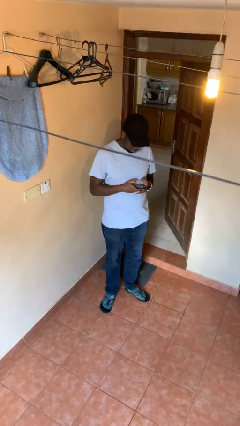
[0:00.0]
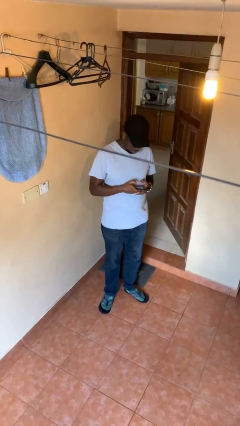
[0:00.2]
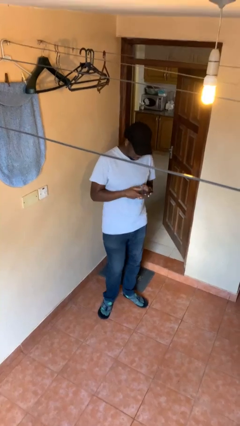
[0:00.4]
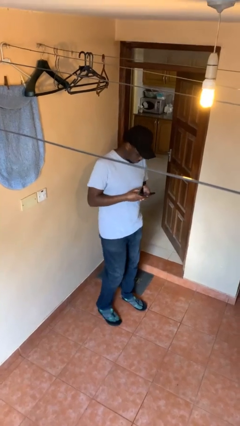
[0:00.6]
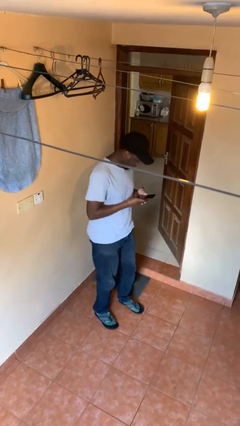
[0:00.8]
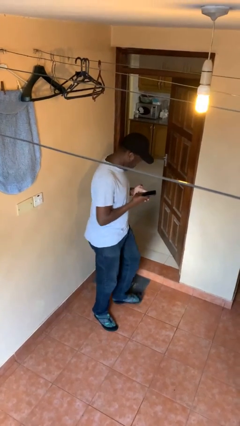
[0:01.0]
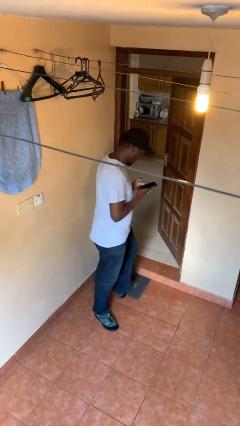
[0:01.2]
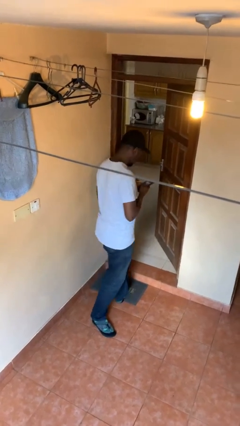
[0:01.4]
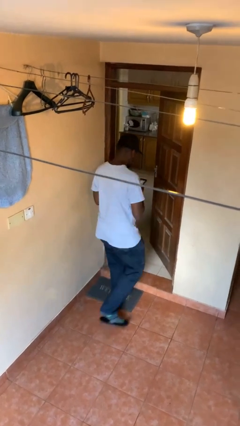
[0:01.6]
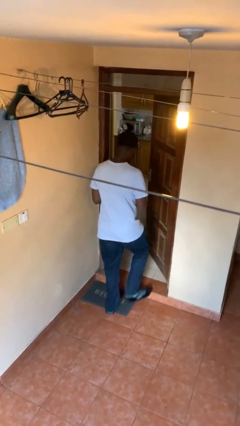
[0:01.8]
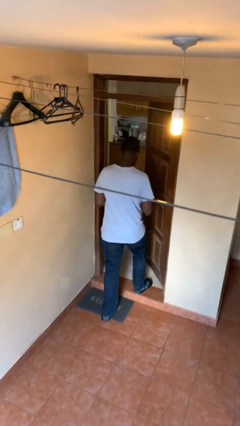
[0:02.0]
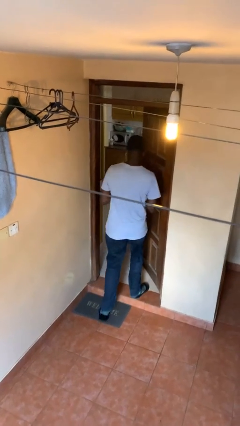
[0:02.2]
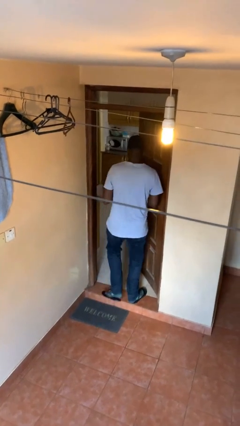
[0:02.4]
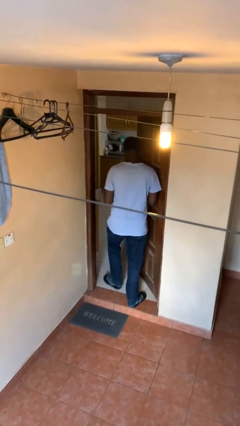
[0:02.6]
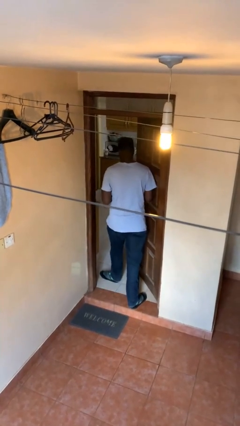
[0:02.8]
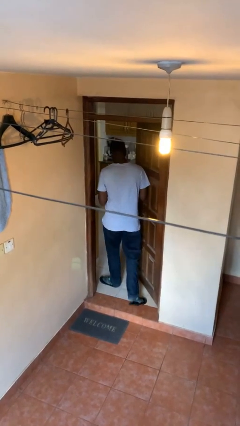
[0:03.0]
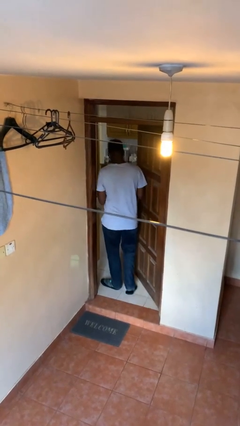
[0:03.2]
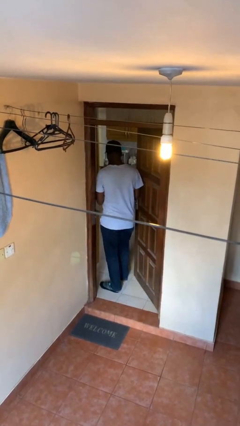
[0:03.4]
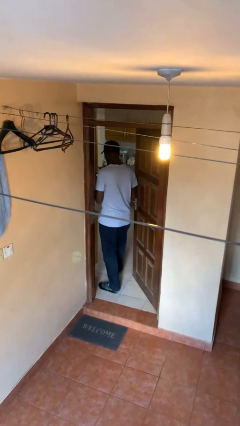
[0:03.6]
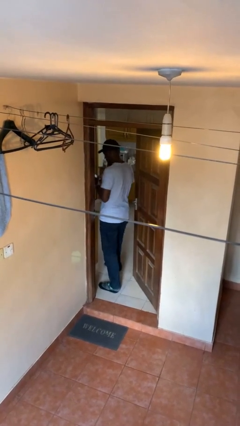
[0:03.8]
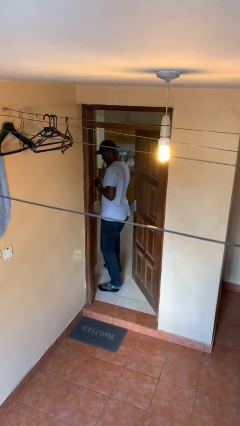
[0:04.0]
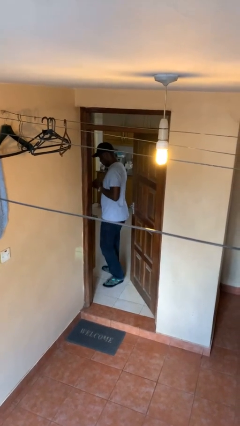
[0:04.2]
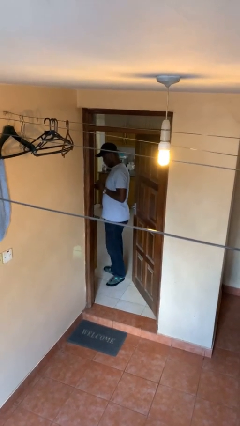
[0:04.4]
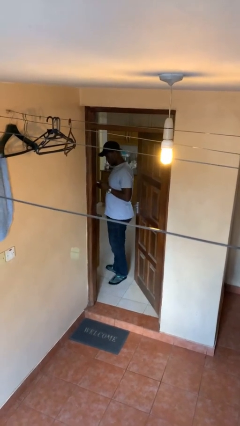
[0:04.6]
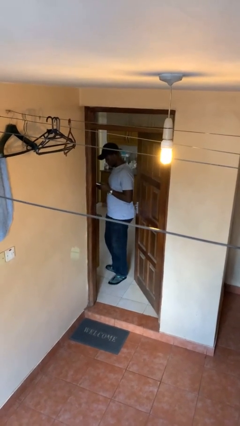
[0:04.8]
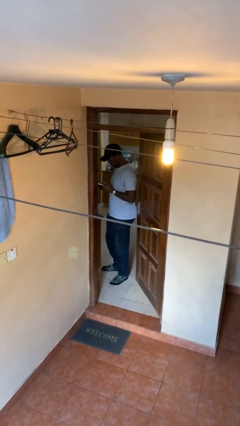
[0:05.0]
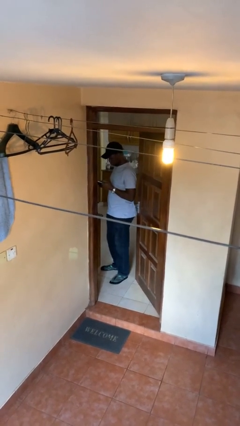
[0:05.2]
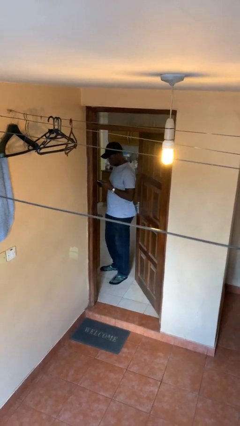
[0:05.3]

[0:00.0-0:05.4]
person exits scene through structure

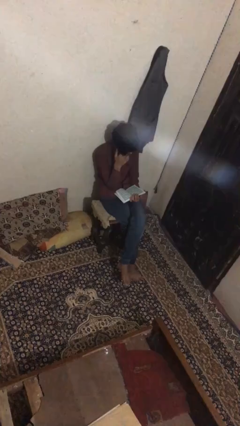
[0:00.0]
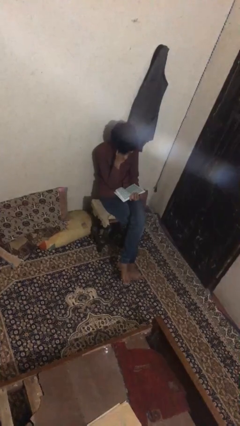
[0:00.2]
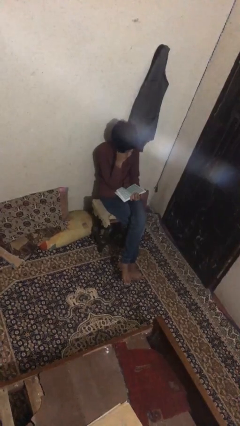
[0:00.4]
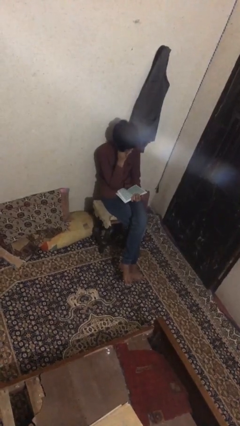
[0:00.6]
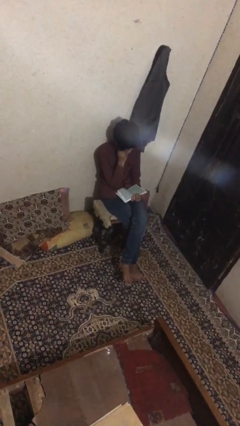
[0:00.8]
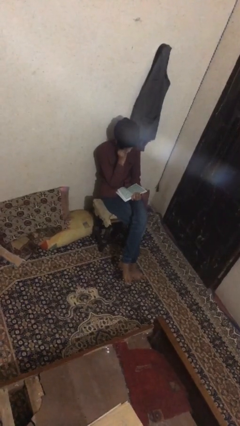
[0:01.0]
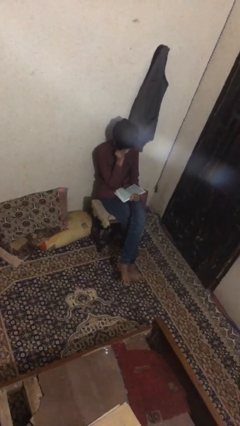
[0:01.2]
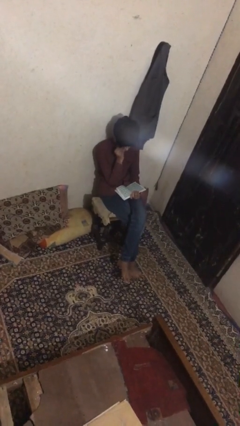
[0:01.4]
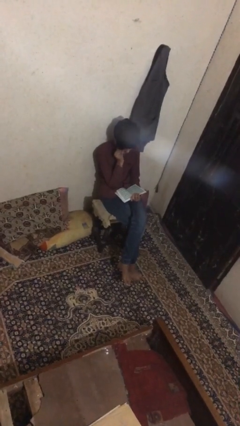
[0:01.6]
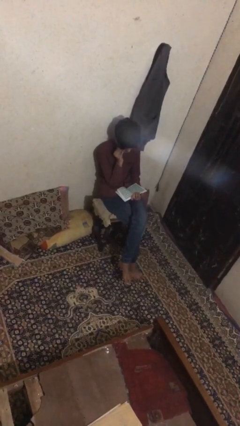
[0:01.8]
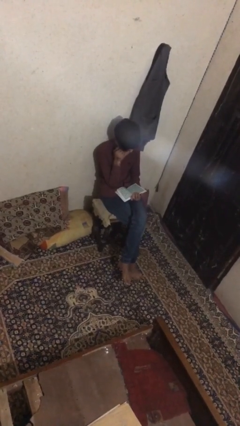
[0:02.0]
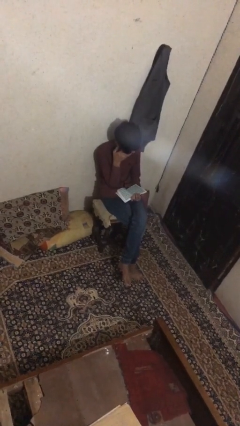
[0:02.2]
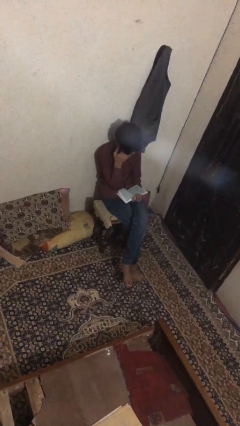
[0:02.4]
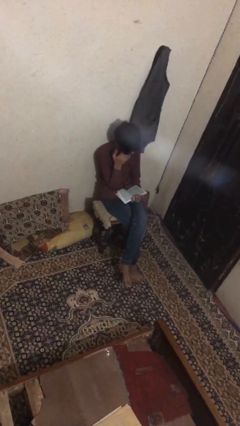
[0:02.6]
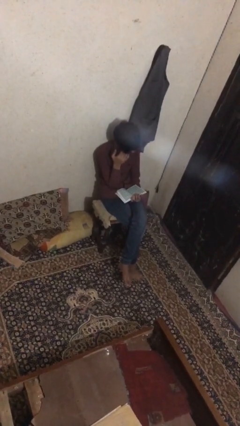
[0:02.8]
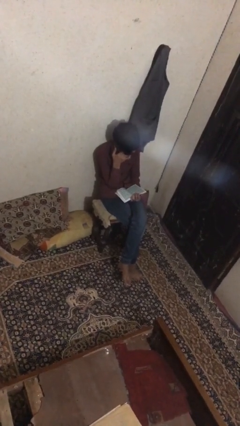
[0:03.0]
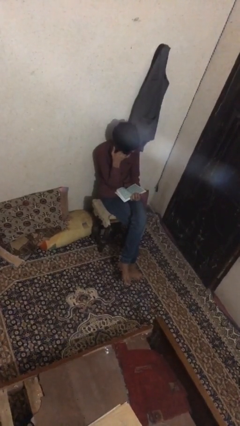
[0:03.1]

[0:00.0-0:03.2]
person reads document

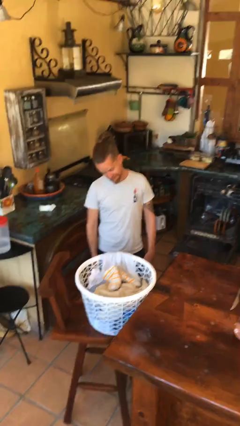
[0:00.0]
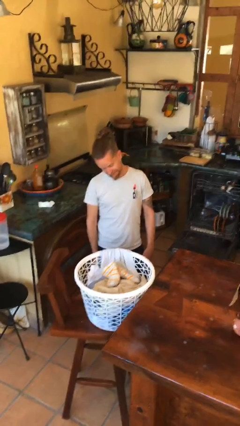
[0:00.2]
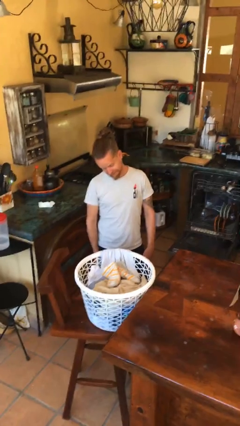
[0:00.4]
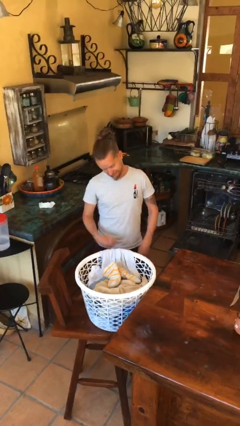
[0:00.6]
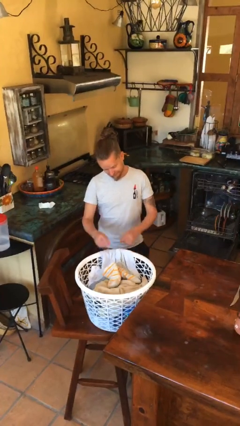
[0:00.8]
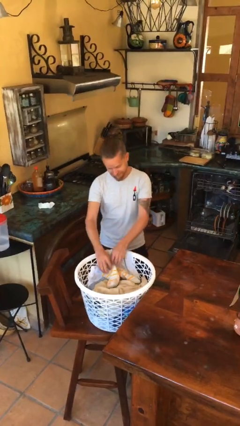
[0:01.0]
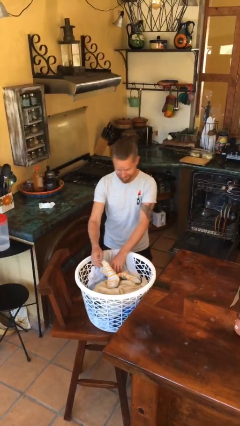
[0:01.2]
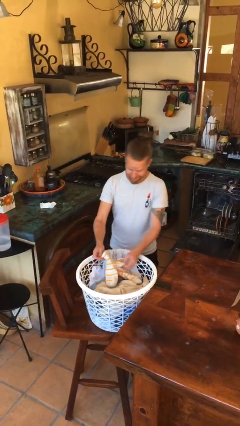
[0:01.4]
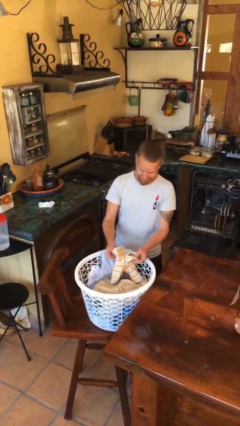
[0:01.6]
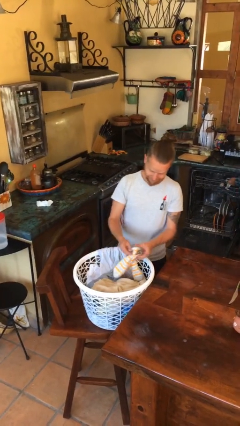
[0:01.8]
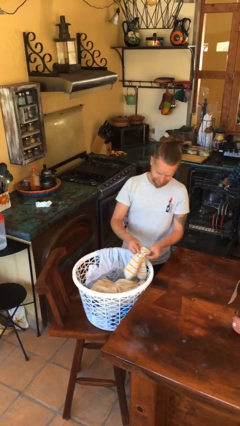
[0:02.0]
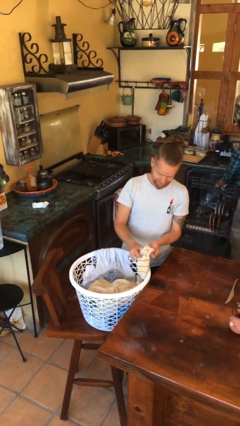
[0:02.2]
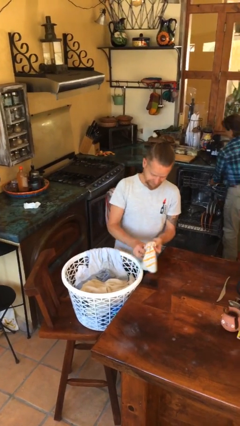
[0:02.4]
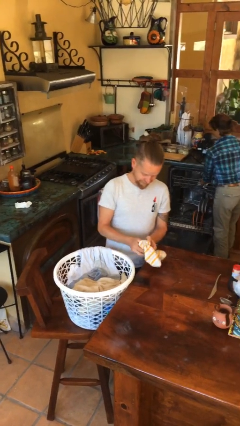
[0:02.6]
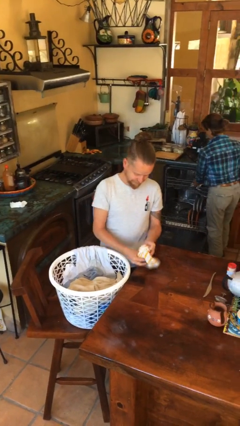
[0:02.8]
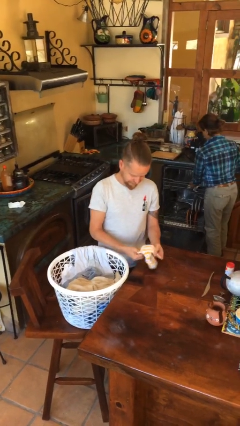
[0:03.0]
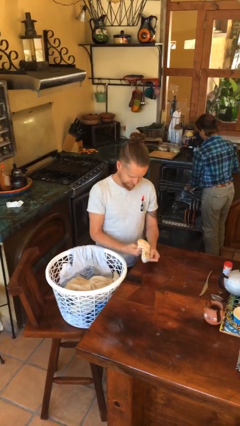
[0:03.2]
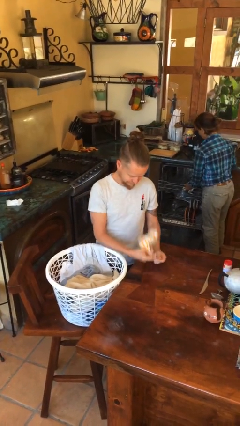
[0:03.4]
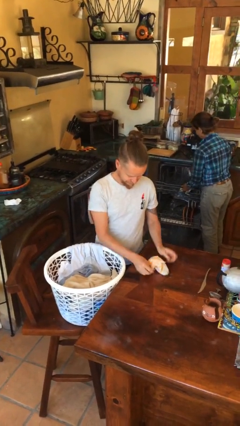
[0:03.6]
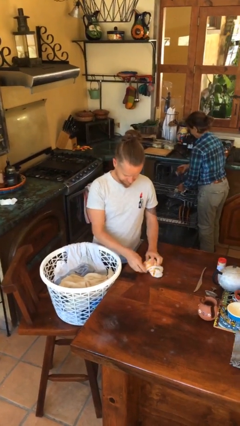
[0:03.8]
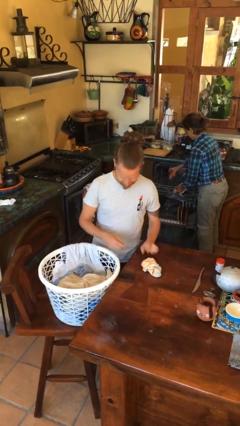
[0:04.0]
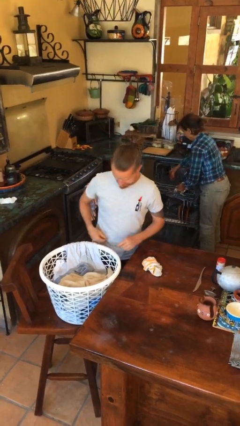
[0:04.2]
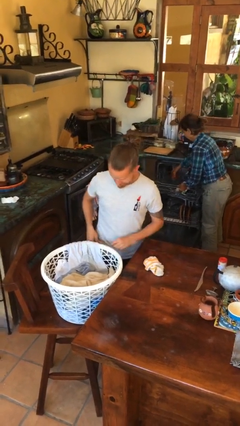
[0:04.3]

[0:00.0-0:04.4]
person folds socks

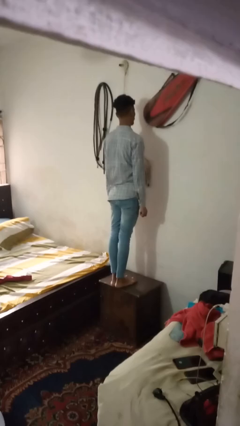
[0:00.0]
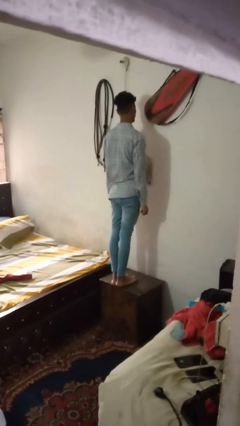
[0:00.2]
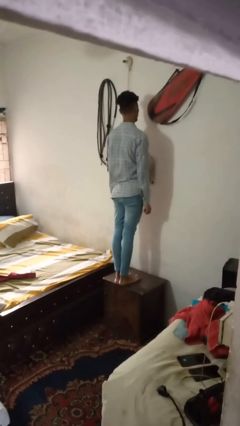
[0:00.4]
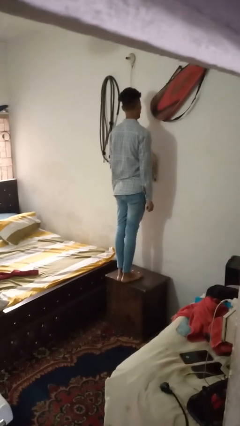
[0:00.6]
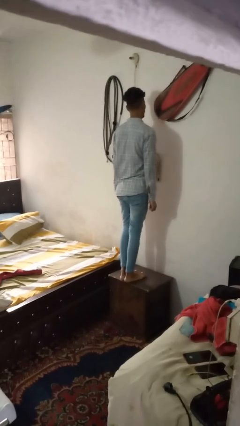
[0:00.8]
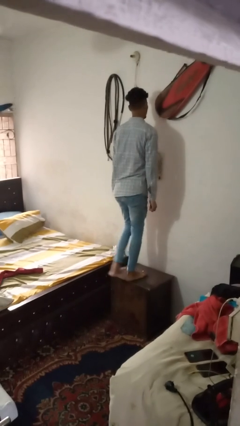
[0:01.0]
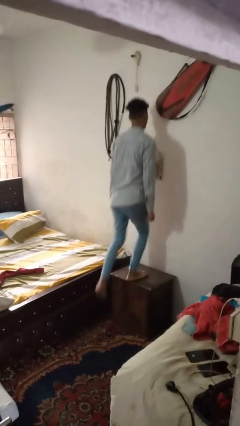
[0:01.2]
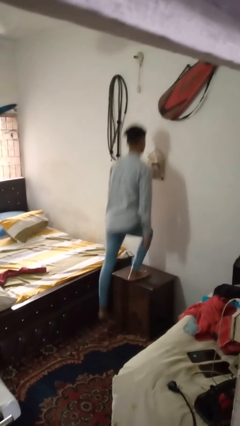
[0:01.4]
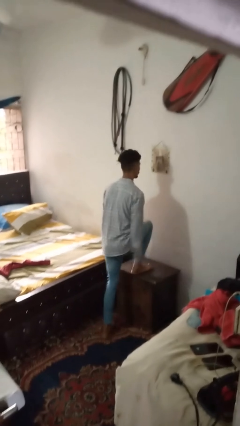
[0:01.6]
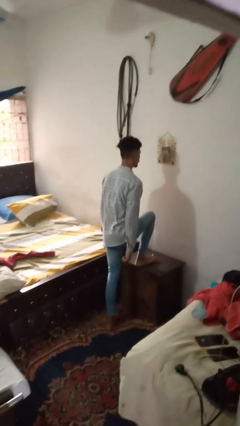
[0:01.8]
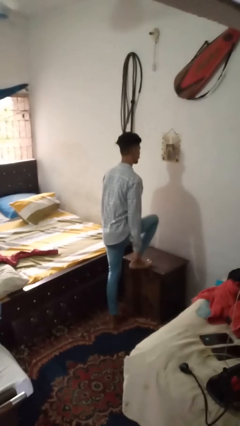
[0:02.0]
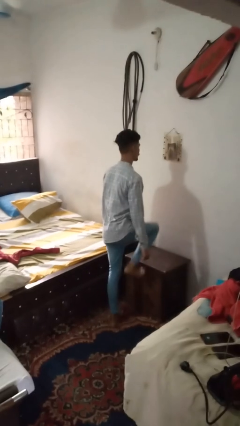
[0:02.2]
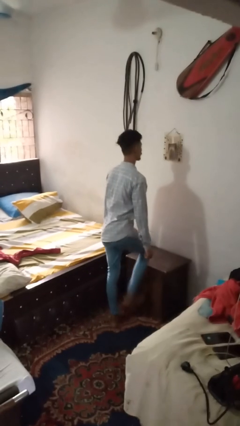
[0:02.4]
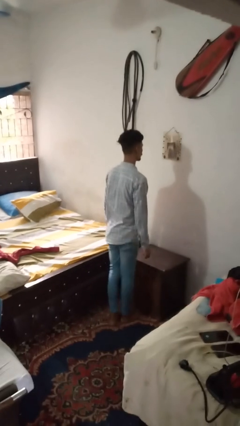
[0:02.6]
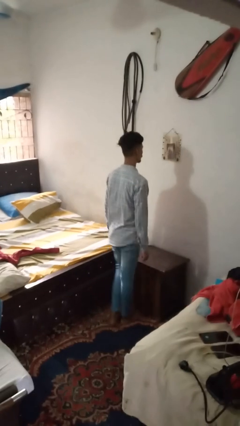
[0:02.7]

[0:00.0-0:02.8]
person climbs off table

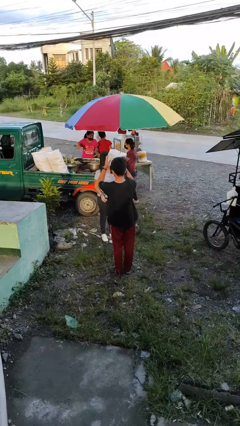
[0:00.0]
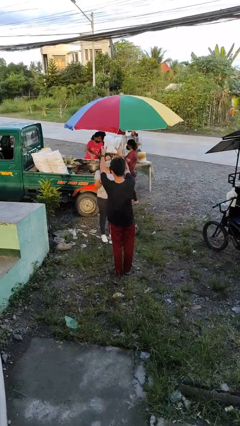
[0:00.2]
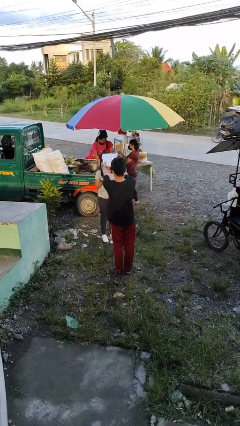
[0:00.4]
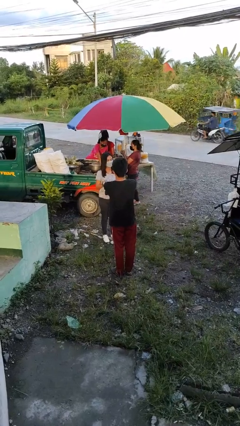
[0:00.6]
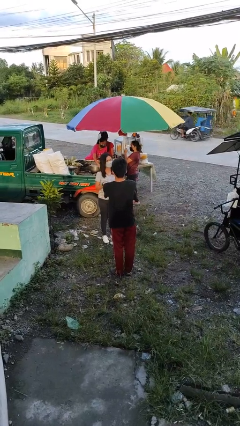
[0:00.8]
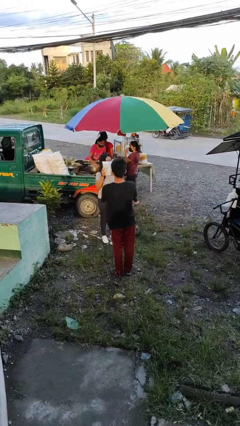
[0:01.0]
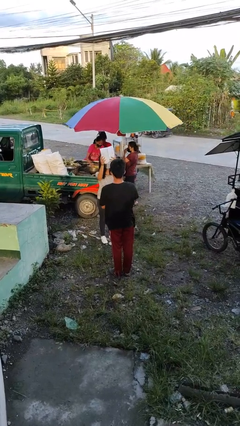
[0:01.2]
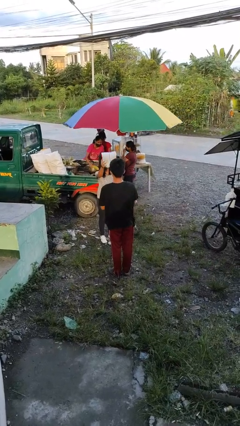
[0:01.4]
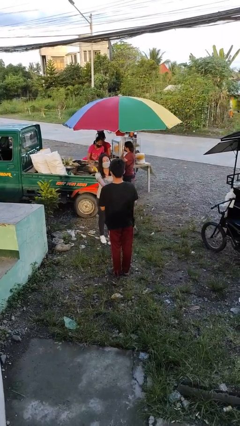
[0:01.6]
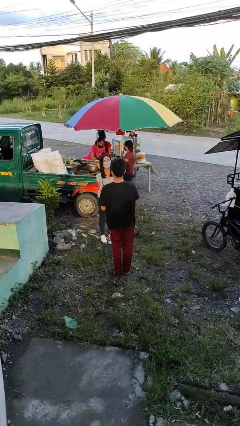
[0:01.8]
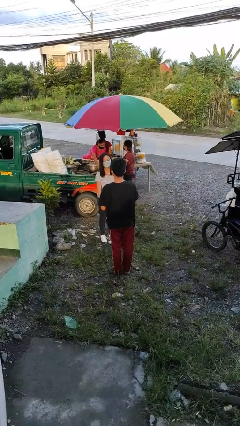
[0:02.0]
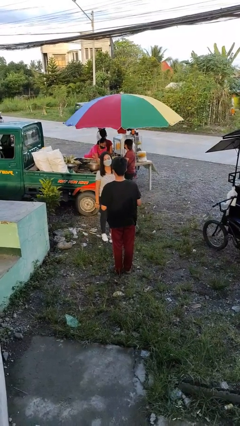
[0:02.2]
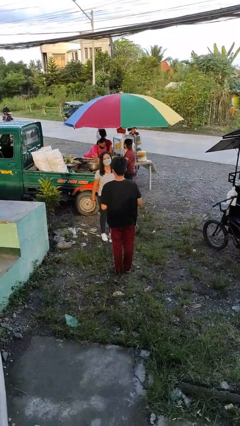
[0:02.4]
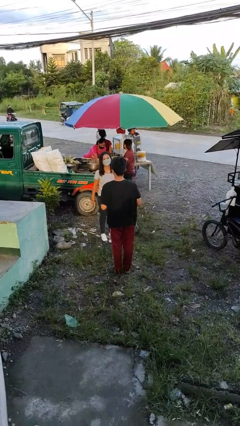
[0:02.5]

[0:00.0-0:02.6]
person transfers object to person
